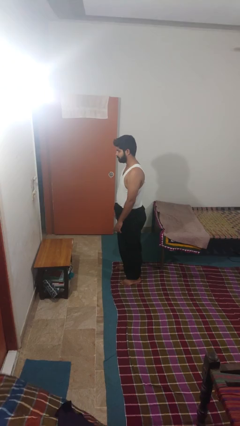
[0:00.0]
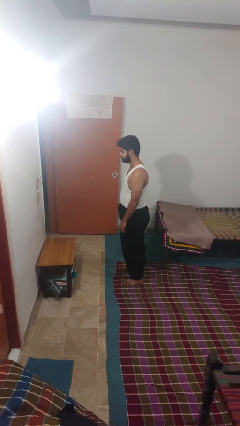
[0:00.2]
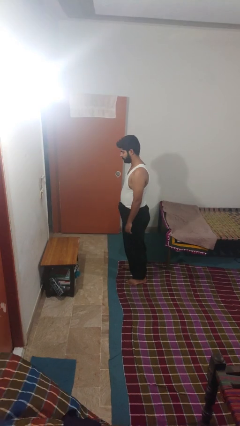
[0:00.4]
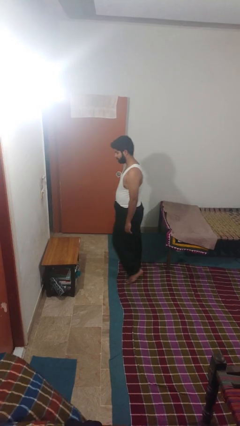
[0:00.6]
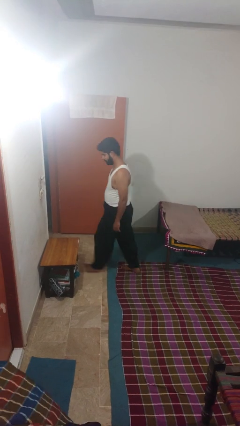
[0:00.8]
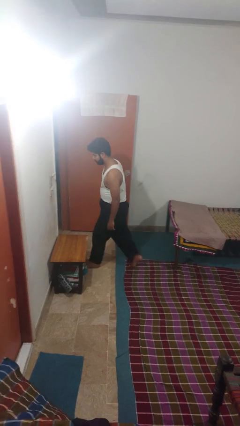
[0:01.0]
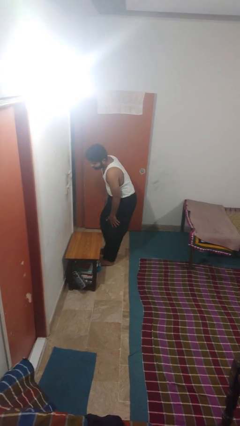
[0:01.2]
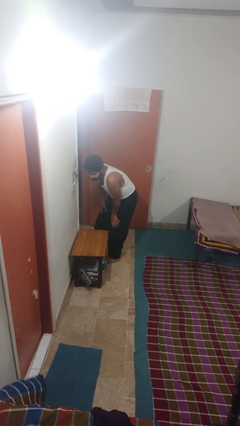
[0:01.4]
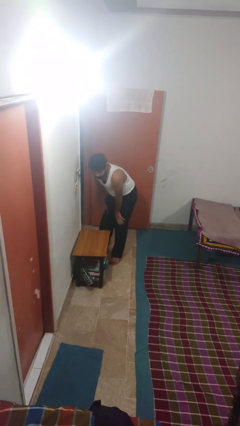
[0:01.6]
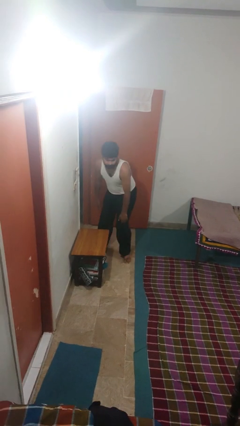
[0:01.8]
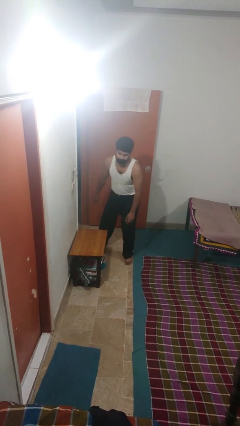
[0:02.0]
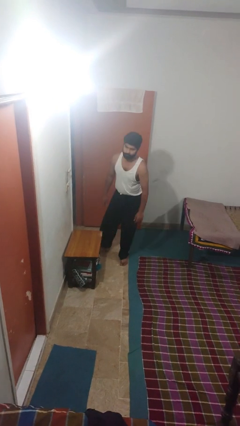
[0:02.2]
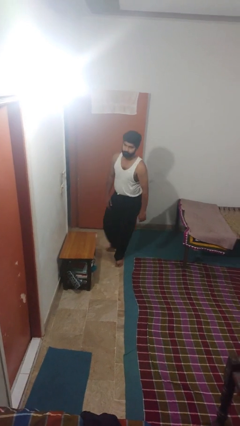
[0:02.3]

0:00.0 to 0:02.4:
person bumps into table

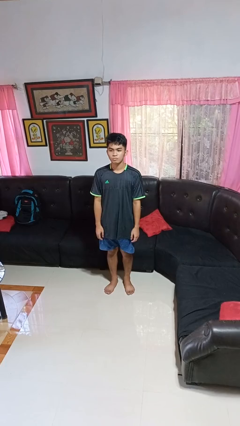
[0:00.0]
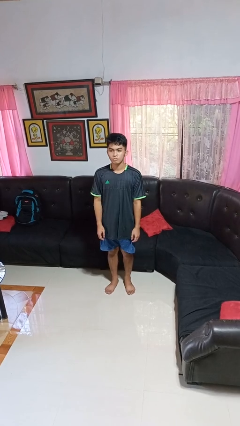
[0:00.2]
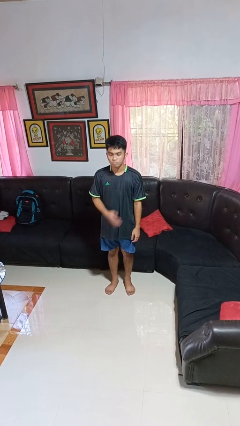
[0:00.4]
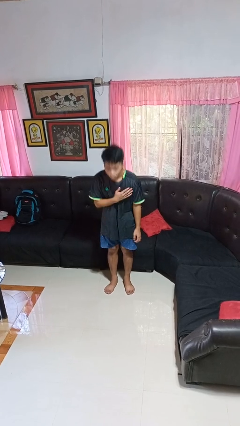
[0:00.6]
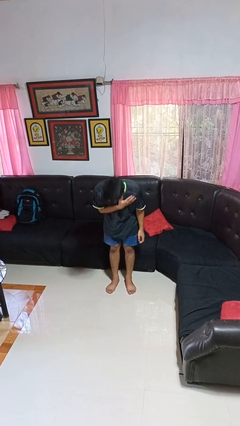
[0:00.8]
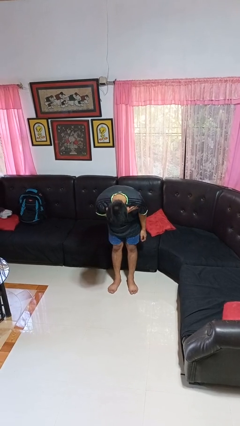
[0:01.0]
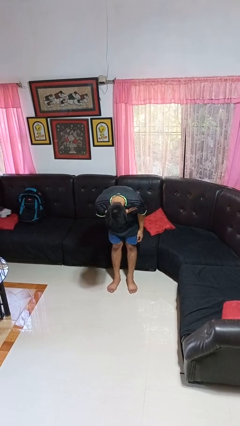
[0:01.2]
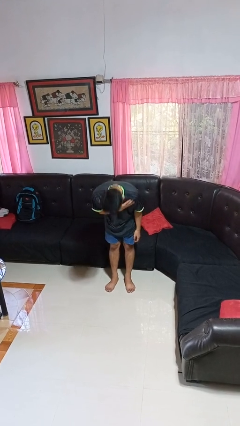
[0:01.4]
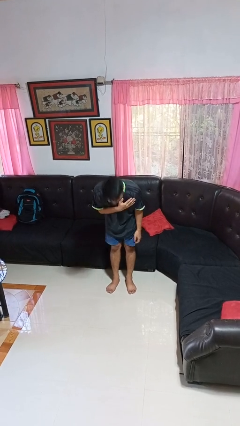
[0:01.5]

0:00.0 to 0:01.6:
person bows

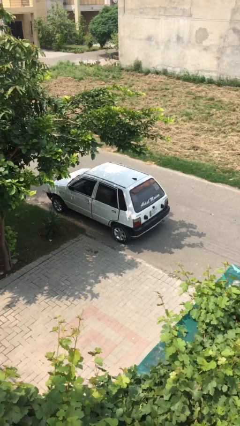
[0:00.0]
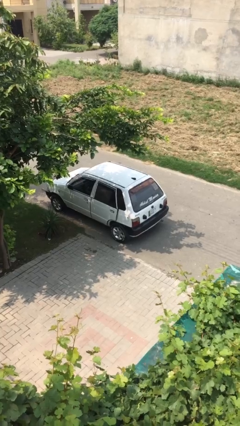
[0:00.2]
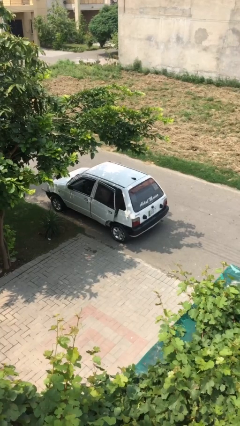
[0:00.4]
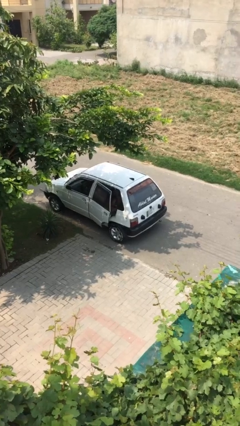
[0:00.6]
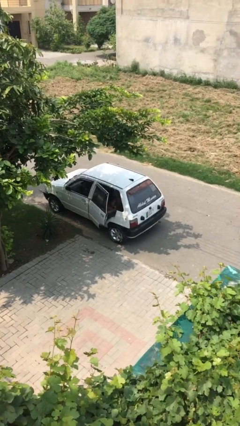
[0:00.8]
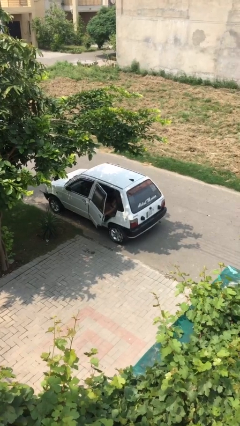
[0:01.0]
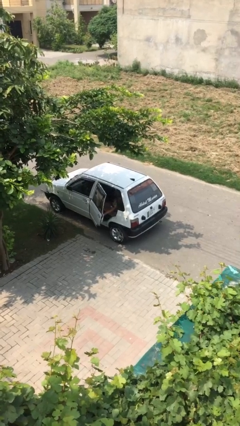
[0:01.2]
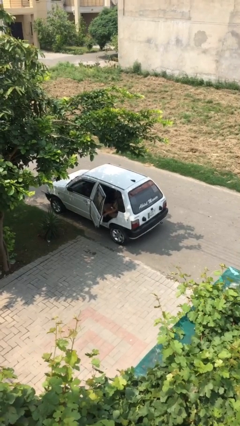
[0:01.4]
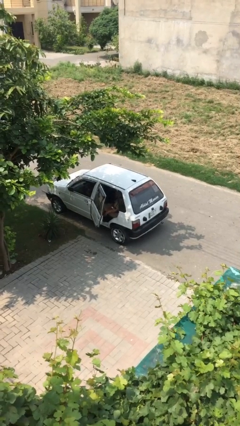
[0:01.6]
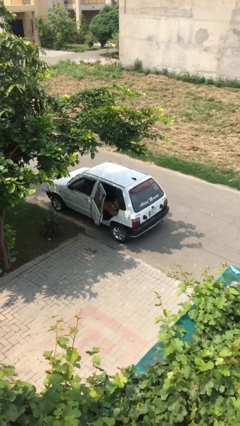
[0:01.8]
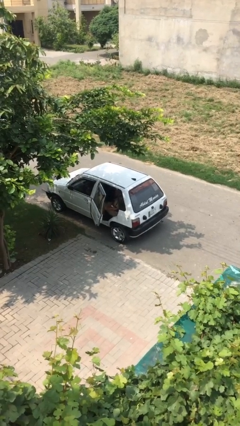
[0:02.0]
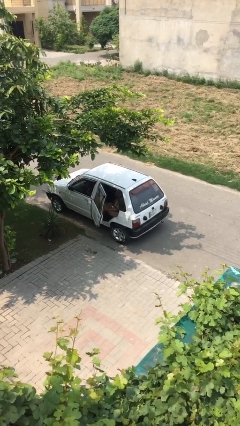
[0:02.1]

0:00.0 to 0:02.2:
person opens car door

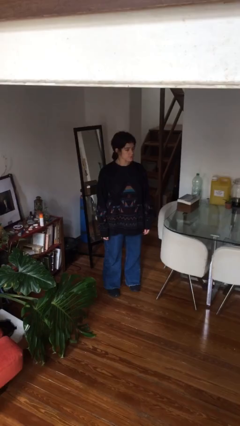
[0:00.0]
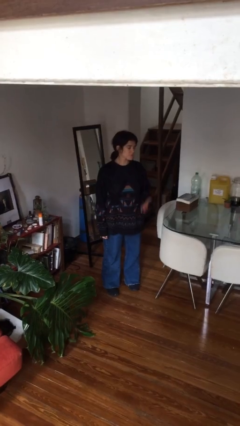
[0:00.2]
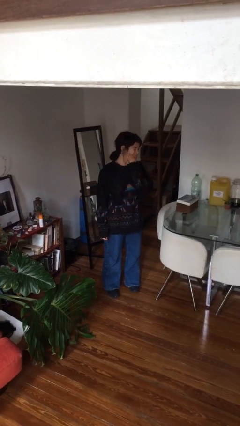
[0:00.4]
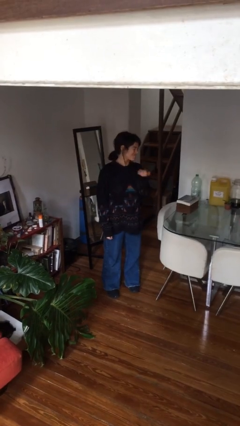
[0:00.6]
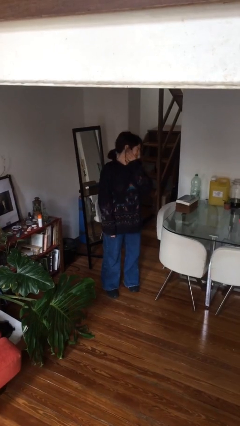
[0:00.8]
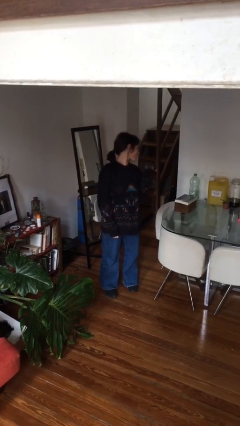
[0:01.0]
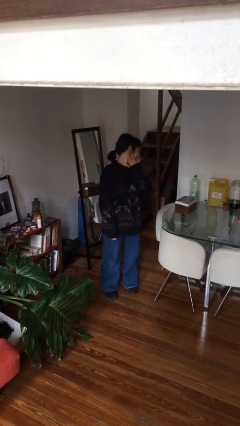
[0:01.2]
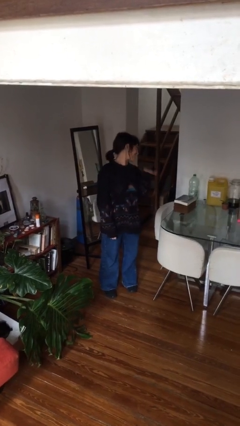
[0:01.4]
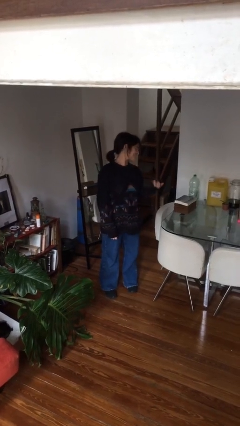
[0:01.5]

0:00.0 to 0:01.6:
person swats bug

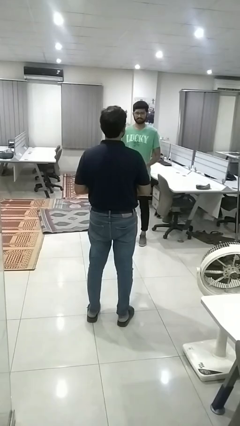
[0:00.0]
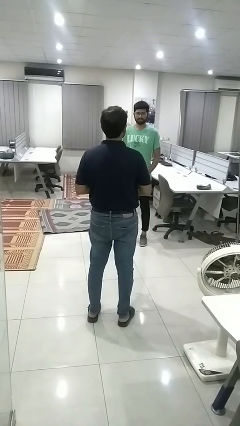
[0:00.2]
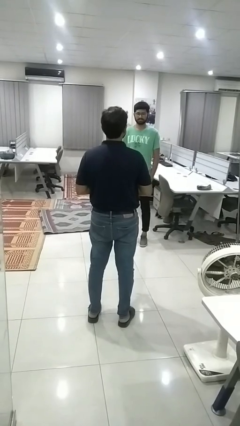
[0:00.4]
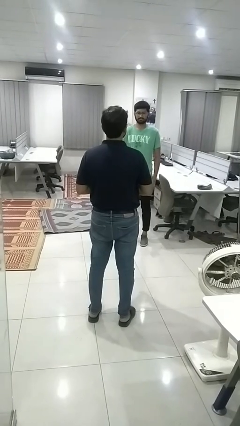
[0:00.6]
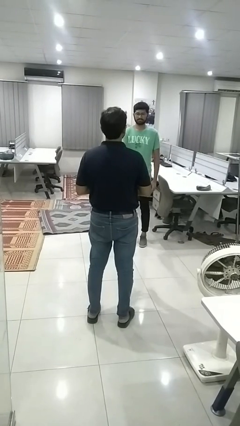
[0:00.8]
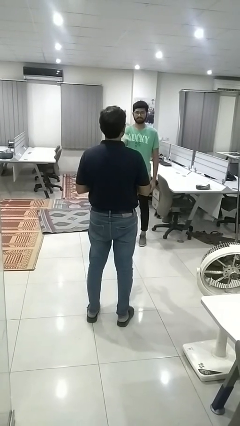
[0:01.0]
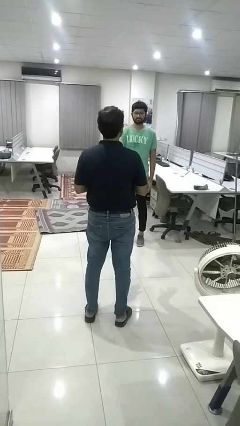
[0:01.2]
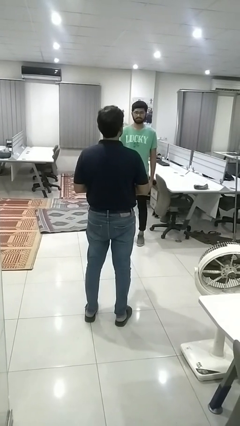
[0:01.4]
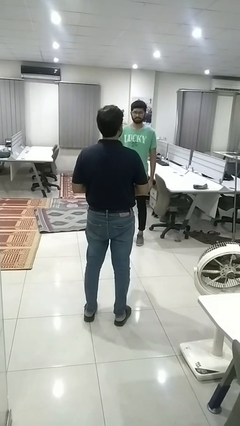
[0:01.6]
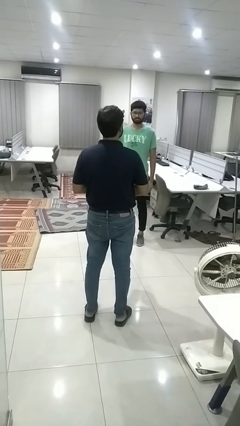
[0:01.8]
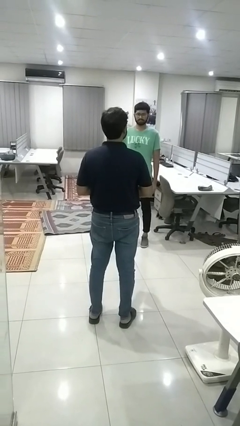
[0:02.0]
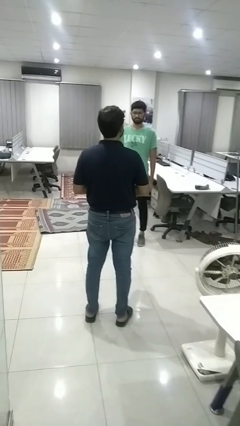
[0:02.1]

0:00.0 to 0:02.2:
person catches object from person

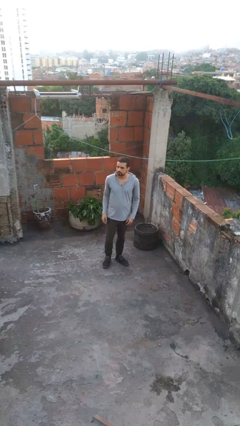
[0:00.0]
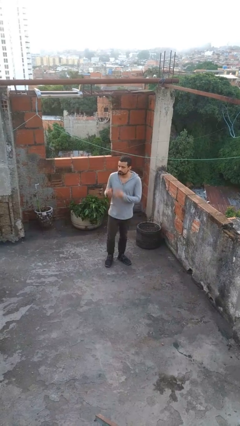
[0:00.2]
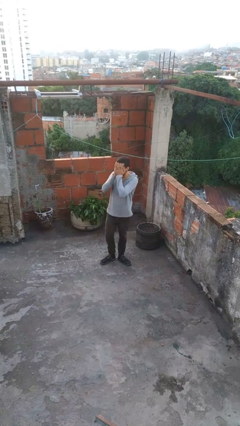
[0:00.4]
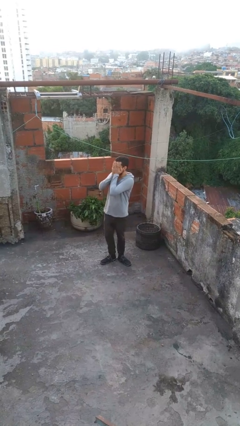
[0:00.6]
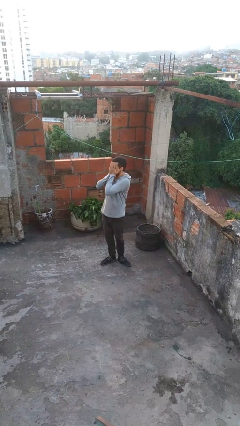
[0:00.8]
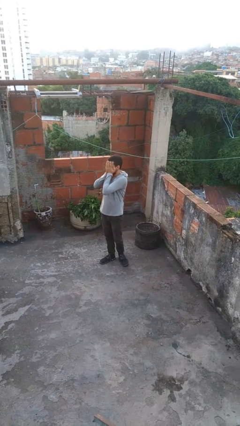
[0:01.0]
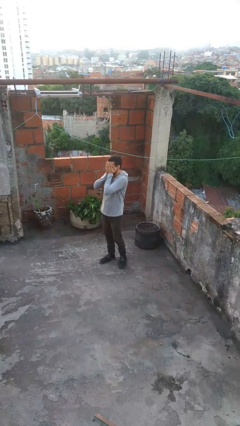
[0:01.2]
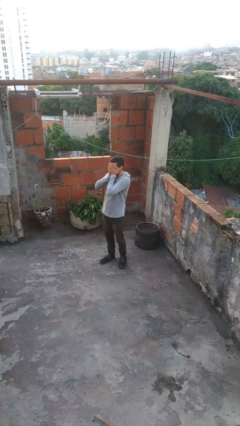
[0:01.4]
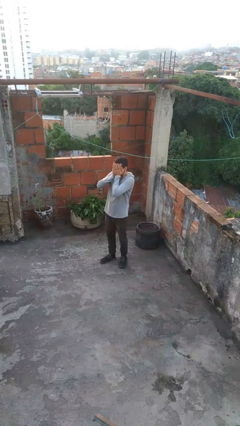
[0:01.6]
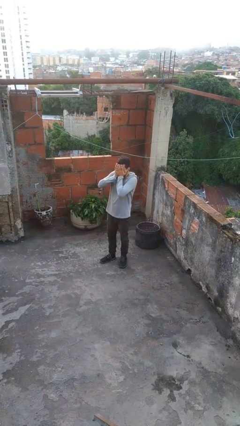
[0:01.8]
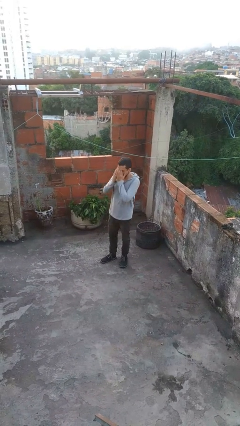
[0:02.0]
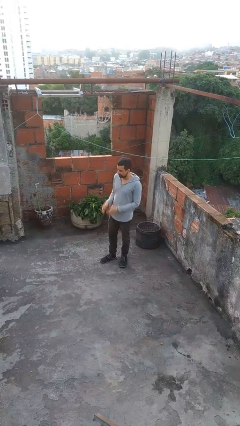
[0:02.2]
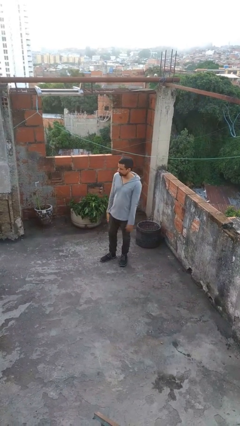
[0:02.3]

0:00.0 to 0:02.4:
person covers face with hands

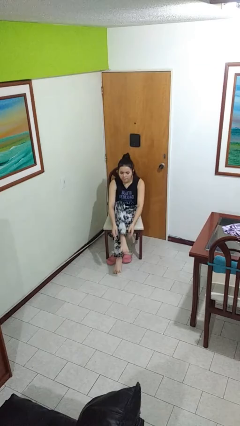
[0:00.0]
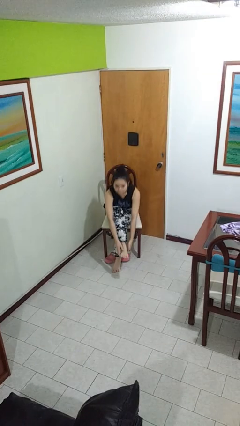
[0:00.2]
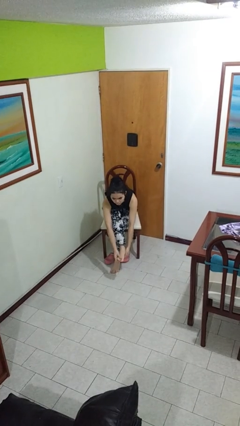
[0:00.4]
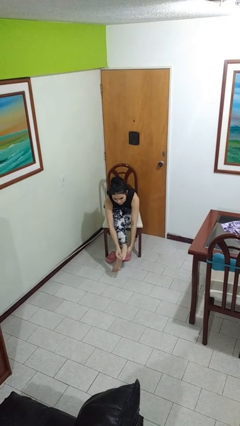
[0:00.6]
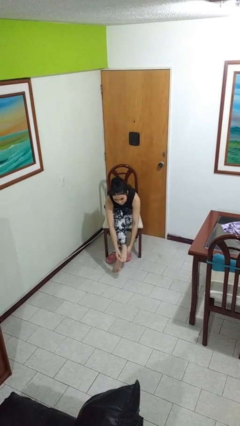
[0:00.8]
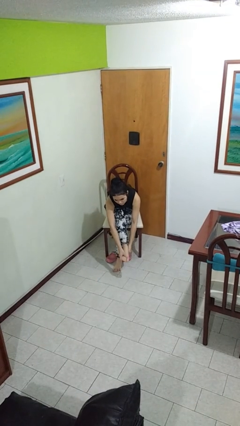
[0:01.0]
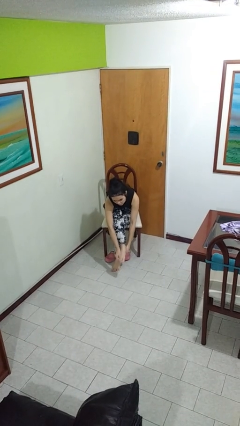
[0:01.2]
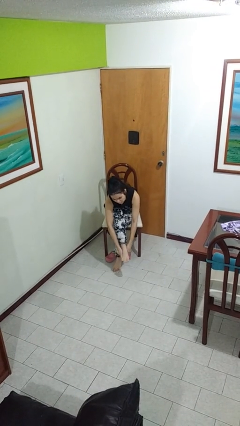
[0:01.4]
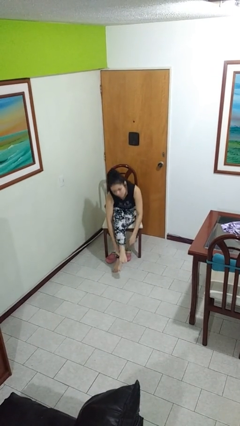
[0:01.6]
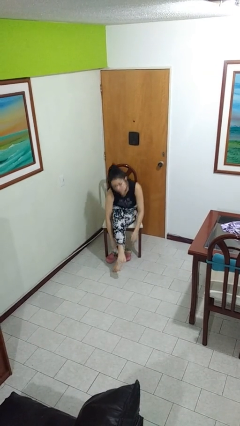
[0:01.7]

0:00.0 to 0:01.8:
person rubs foot

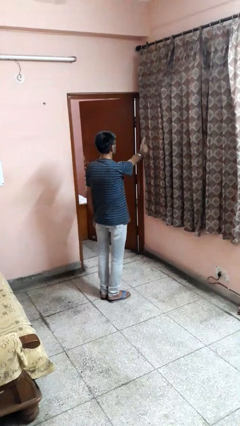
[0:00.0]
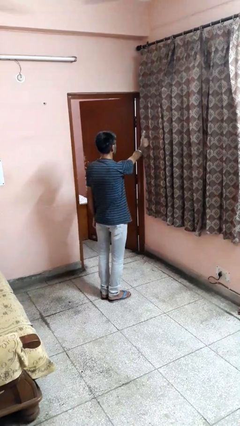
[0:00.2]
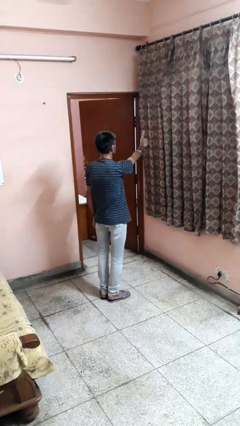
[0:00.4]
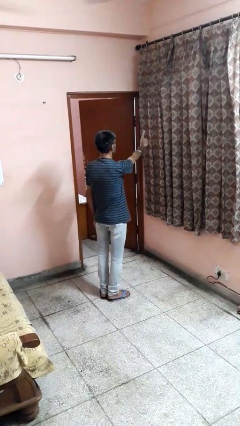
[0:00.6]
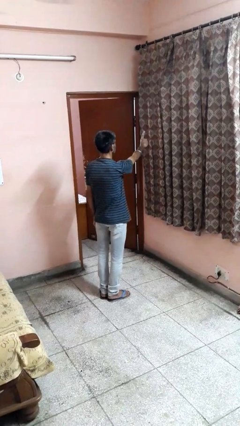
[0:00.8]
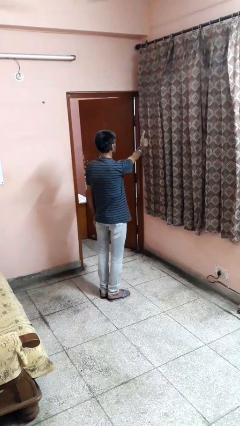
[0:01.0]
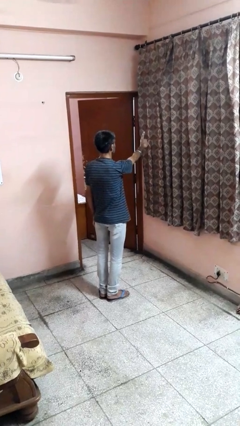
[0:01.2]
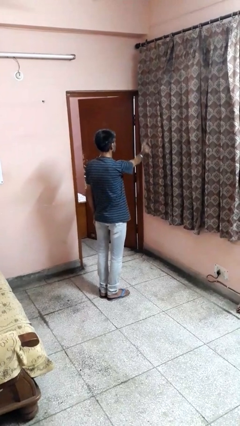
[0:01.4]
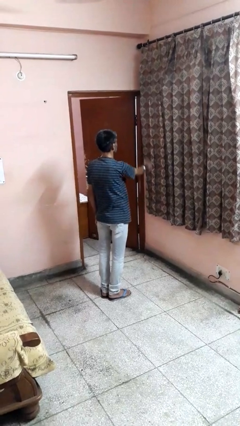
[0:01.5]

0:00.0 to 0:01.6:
person gestures number one

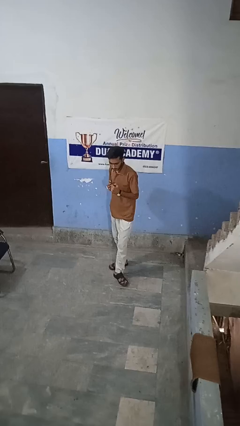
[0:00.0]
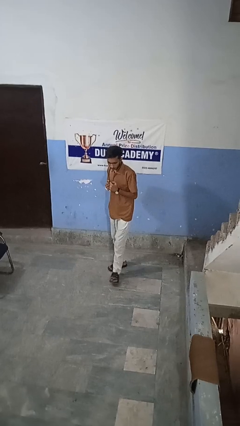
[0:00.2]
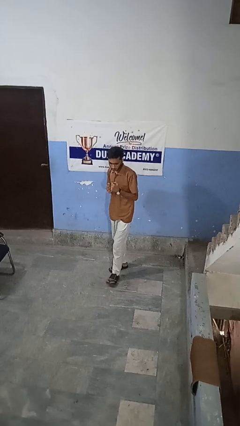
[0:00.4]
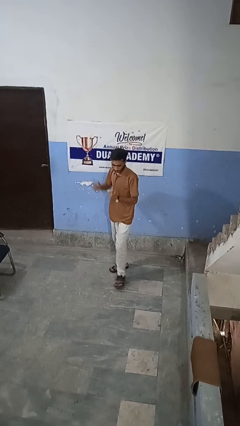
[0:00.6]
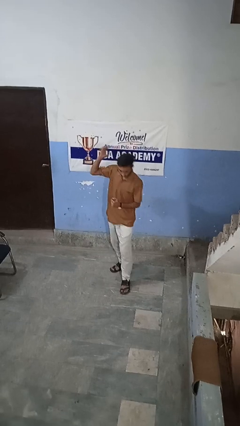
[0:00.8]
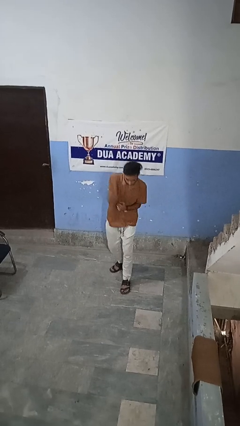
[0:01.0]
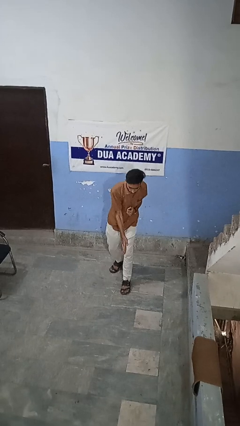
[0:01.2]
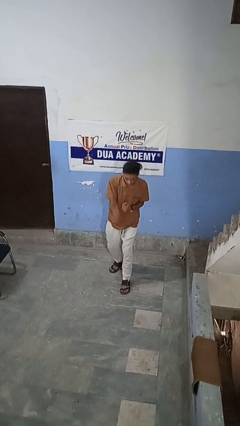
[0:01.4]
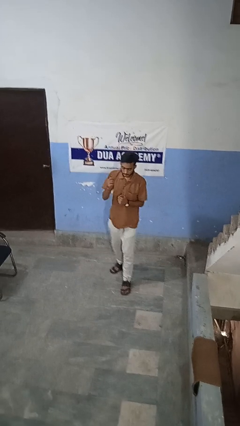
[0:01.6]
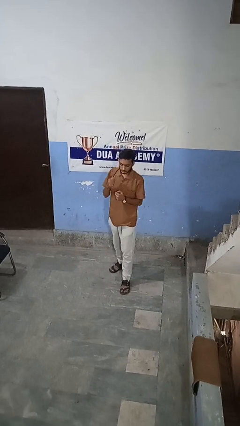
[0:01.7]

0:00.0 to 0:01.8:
person karate chop
